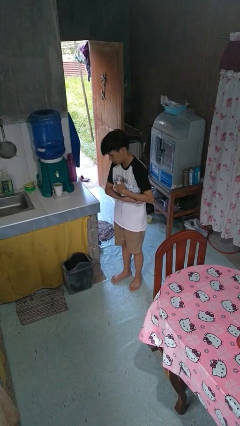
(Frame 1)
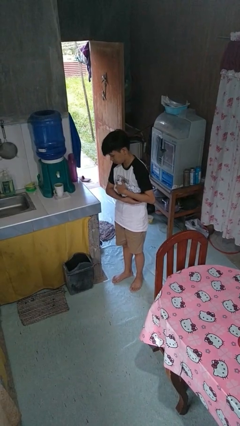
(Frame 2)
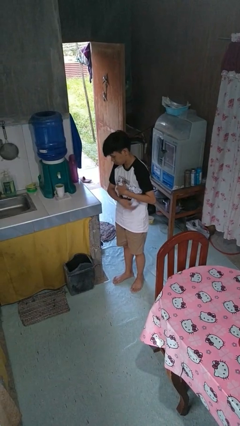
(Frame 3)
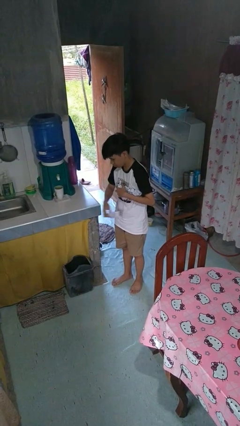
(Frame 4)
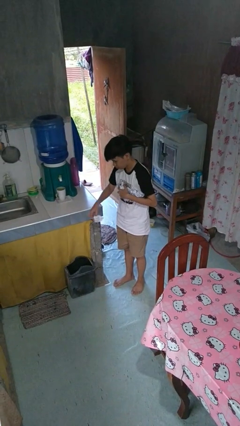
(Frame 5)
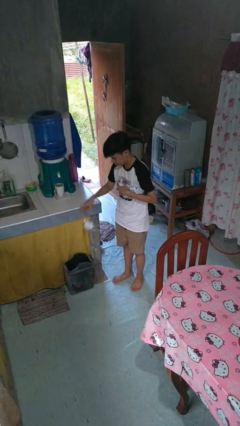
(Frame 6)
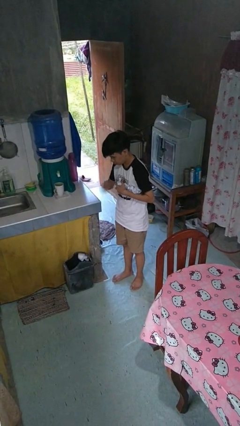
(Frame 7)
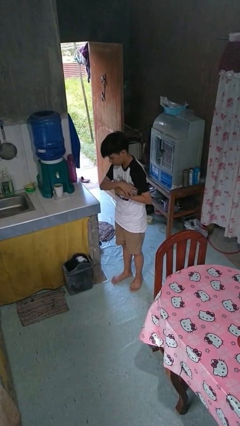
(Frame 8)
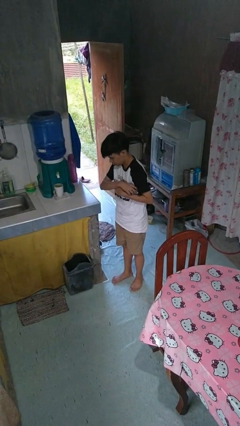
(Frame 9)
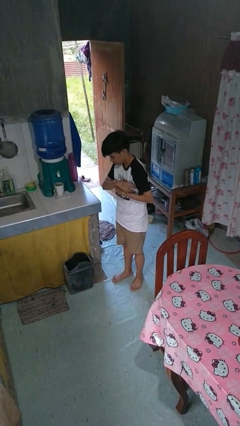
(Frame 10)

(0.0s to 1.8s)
person discards trash

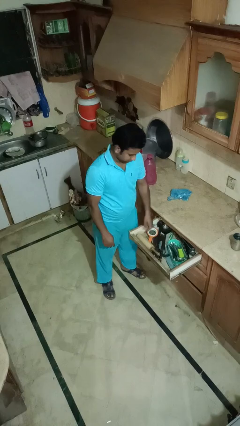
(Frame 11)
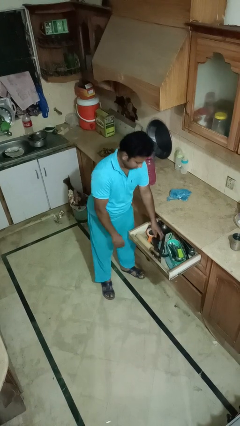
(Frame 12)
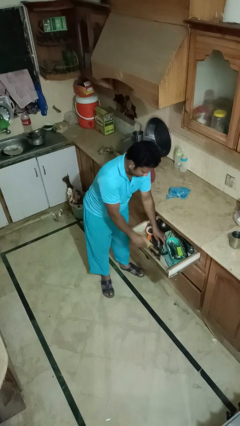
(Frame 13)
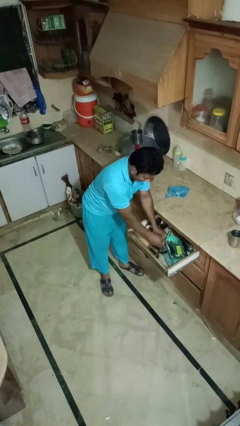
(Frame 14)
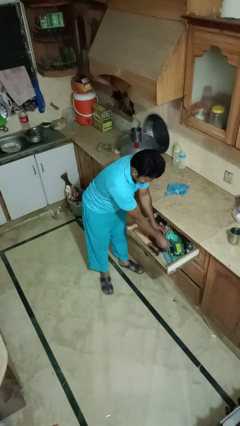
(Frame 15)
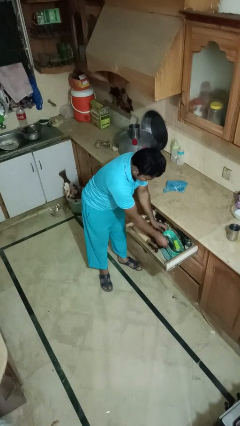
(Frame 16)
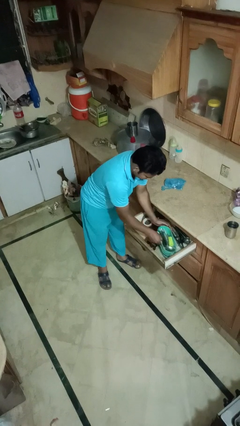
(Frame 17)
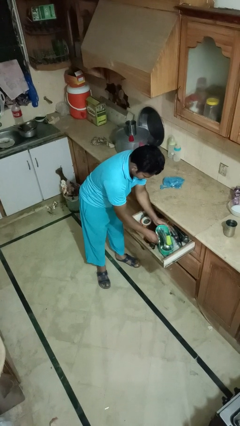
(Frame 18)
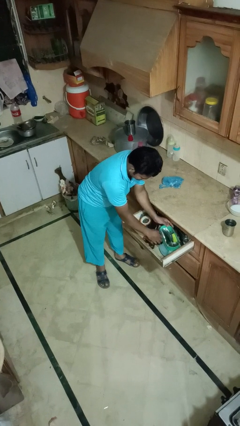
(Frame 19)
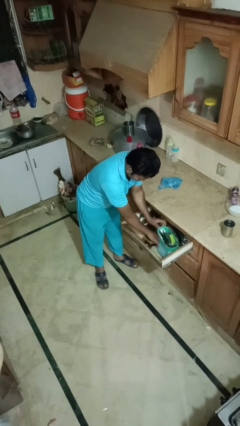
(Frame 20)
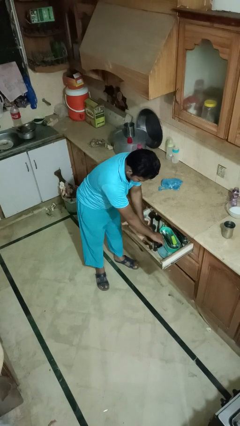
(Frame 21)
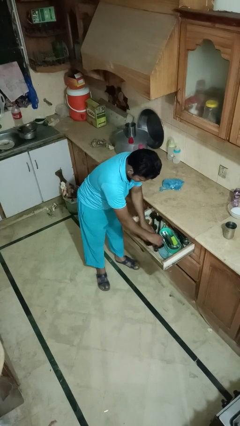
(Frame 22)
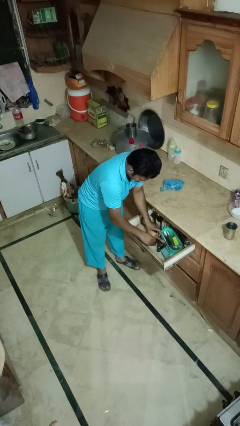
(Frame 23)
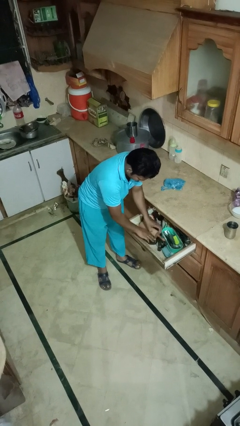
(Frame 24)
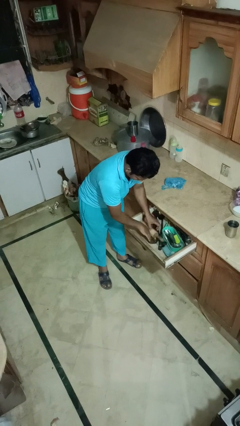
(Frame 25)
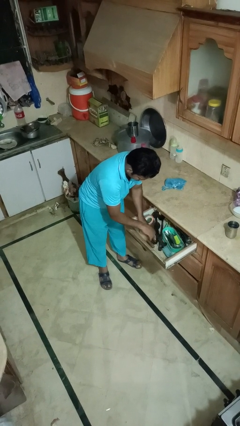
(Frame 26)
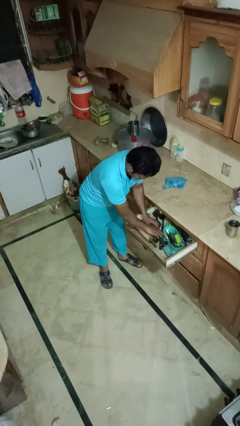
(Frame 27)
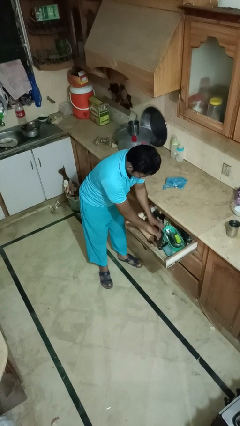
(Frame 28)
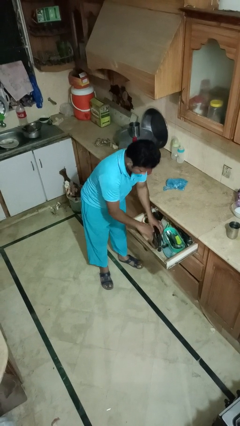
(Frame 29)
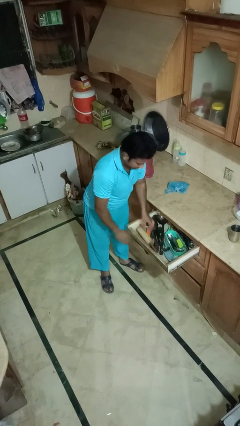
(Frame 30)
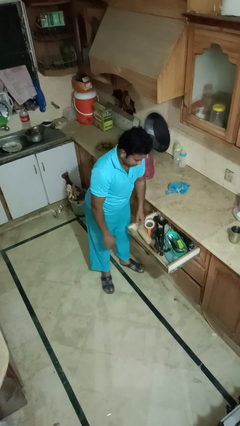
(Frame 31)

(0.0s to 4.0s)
person searches in kitchen drawer

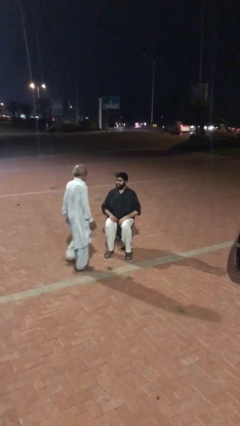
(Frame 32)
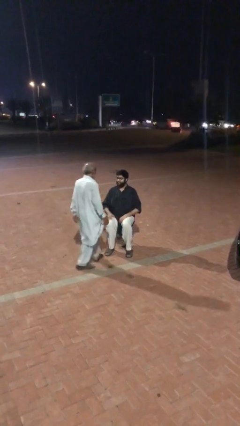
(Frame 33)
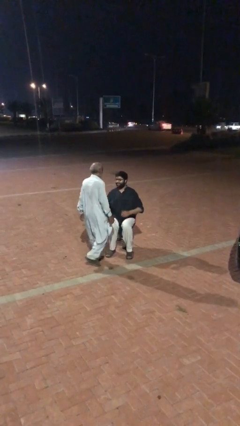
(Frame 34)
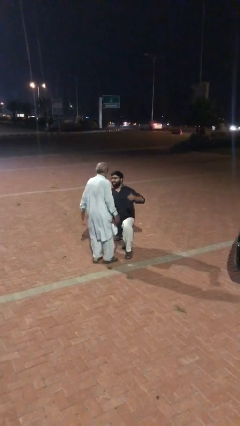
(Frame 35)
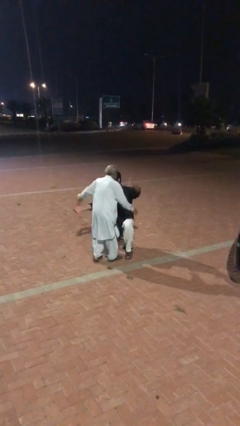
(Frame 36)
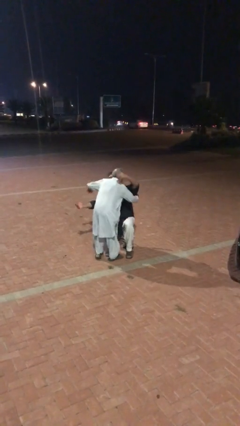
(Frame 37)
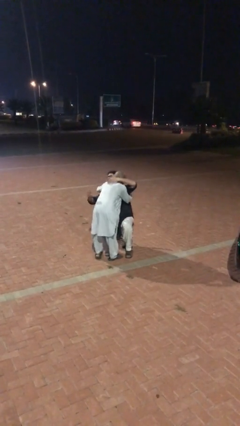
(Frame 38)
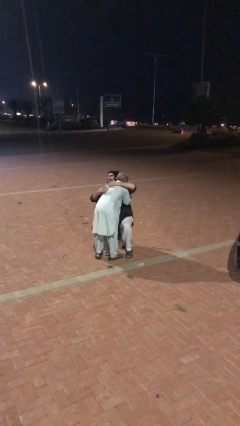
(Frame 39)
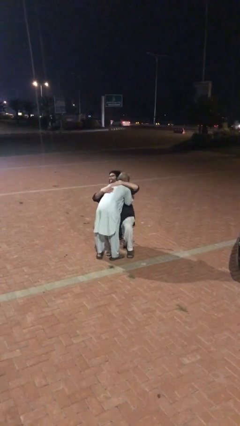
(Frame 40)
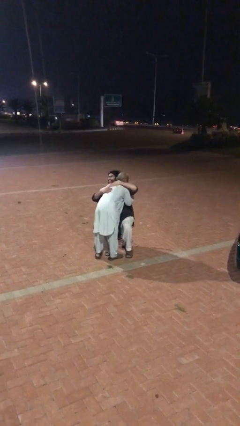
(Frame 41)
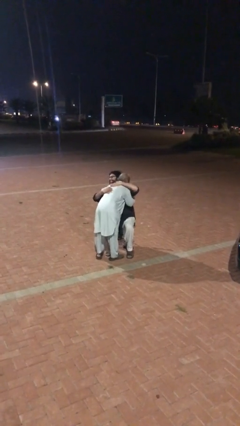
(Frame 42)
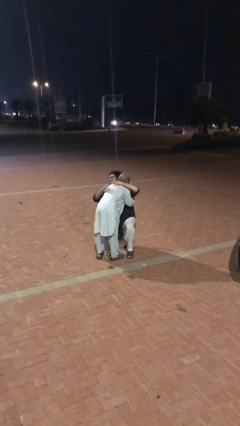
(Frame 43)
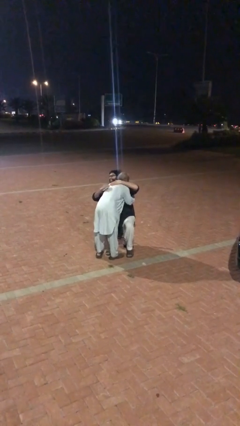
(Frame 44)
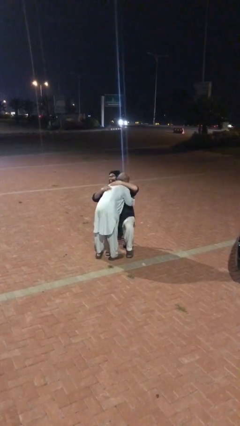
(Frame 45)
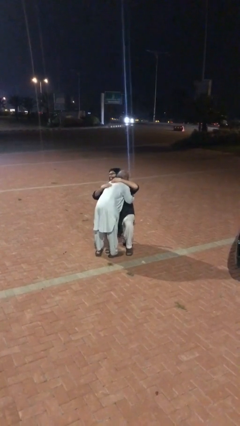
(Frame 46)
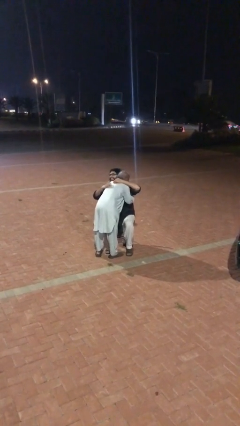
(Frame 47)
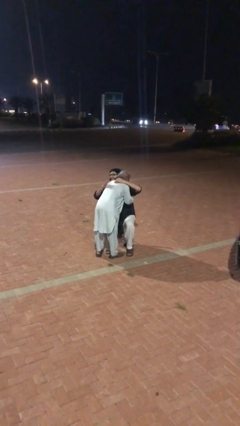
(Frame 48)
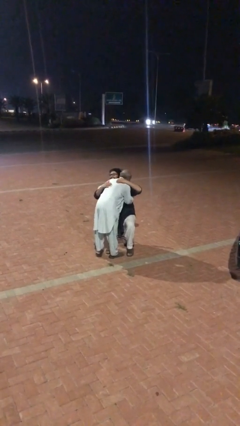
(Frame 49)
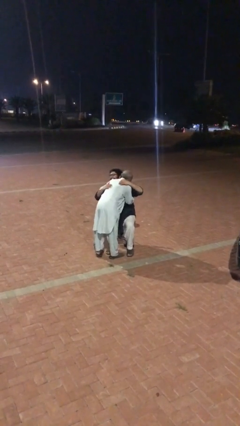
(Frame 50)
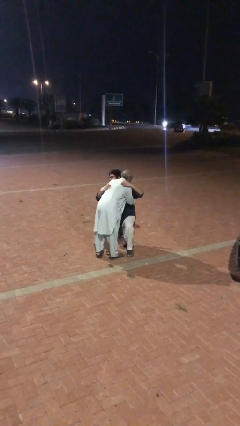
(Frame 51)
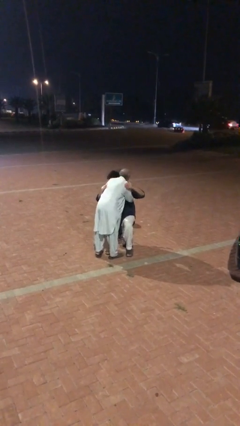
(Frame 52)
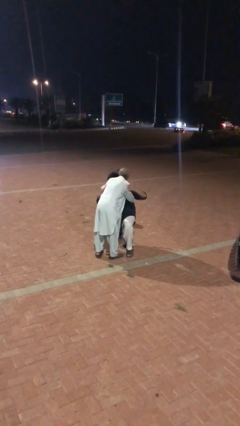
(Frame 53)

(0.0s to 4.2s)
person embraces person

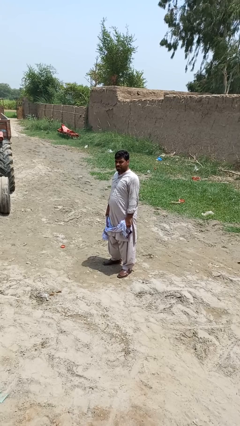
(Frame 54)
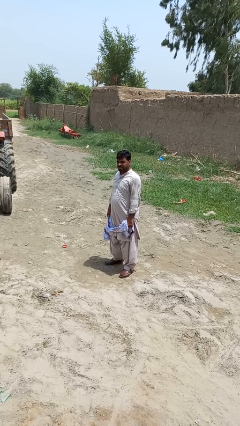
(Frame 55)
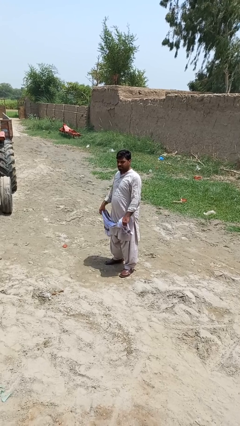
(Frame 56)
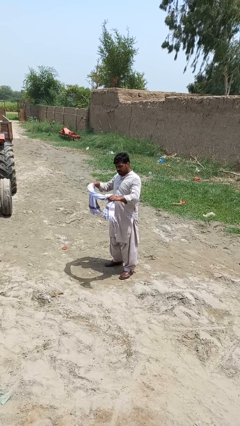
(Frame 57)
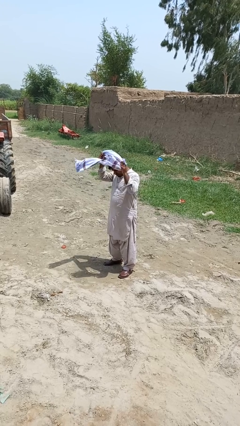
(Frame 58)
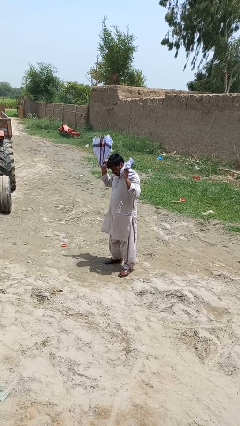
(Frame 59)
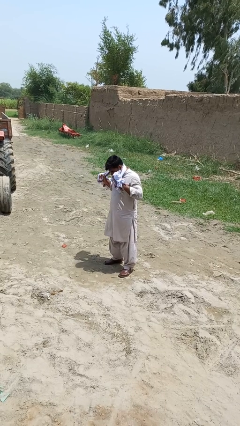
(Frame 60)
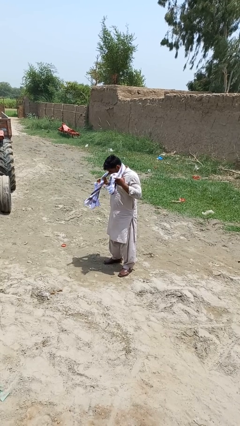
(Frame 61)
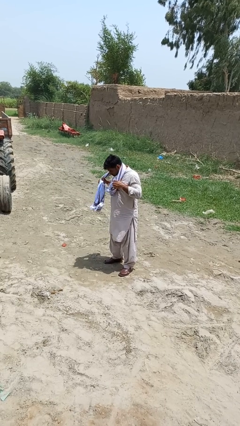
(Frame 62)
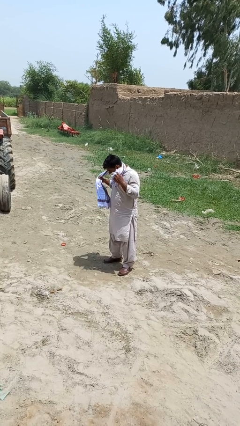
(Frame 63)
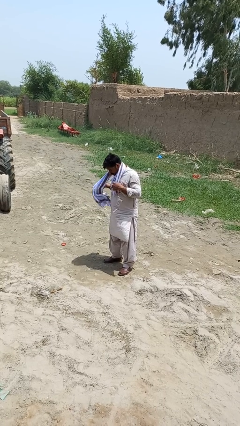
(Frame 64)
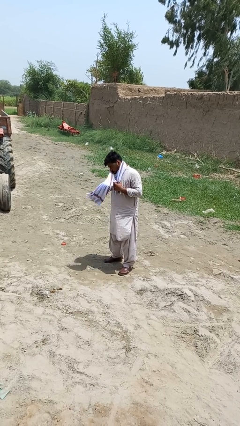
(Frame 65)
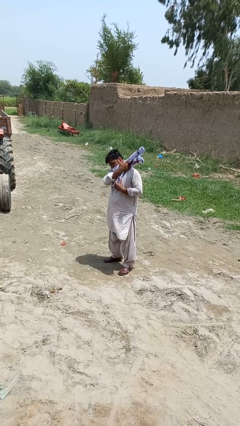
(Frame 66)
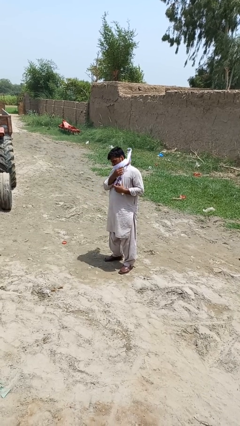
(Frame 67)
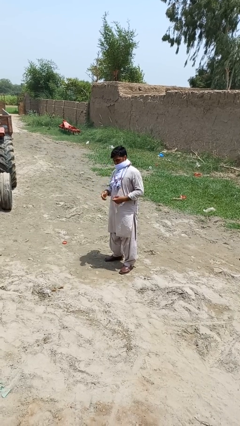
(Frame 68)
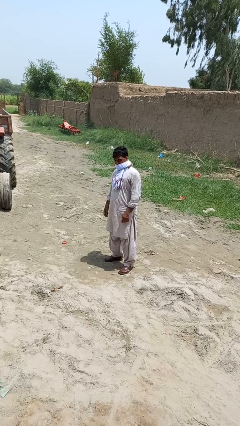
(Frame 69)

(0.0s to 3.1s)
person puts on scarf

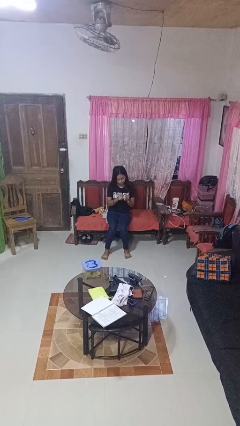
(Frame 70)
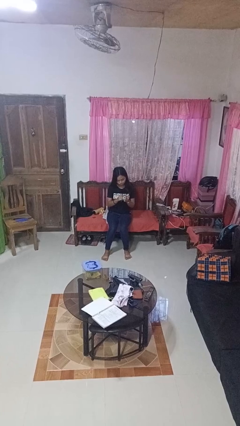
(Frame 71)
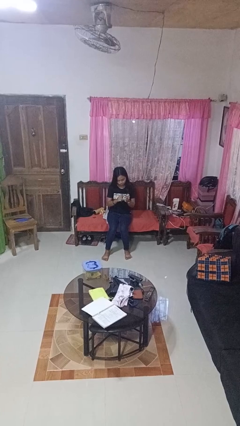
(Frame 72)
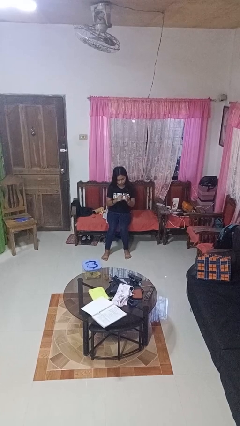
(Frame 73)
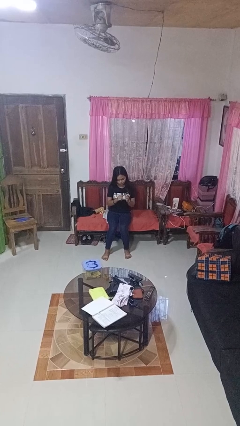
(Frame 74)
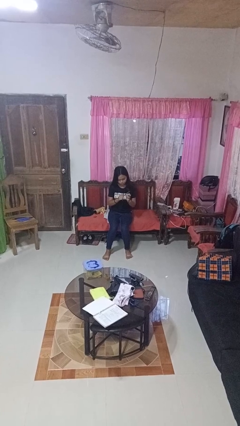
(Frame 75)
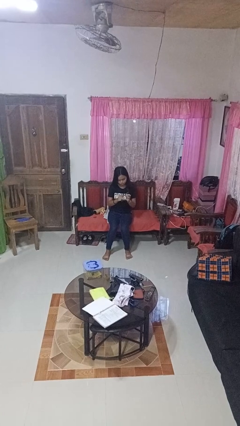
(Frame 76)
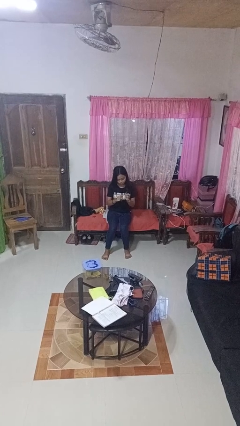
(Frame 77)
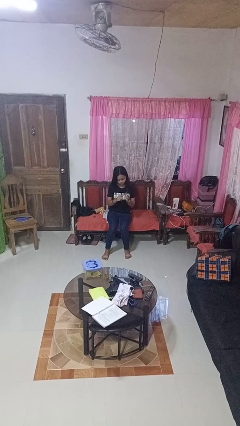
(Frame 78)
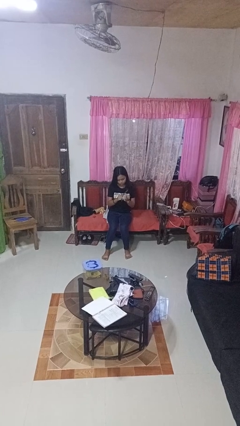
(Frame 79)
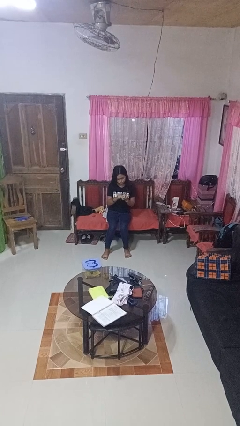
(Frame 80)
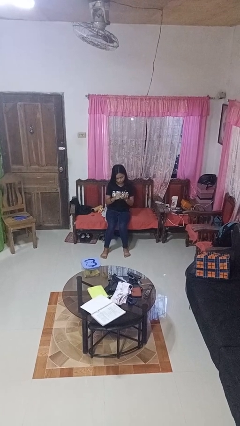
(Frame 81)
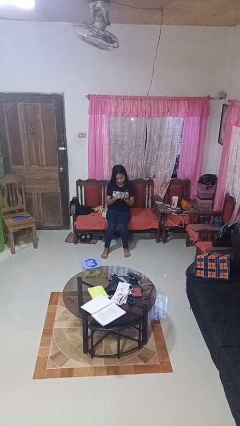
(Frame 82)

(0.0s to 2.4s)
person files fingernails

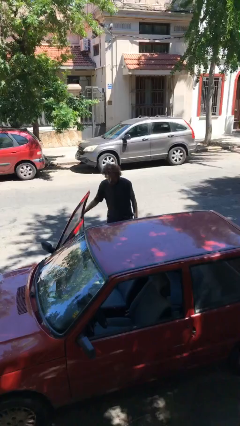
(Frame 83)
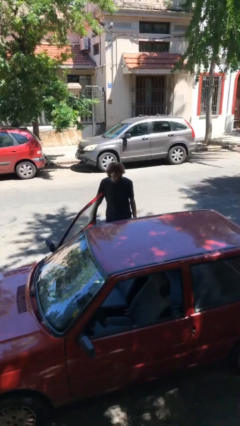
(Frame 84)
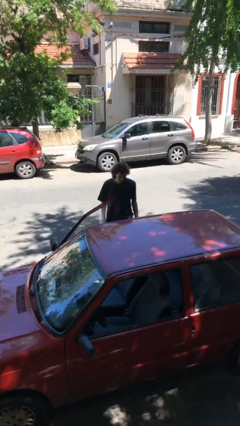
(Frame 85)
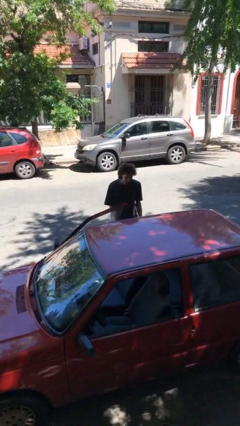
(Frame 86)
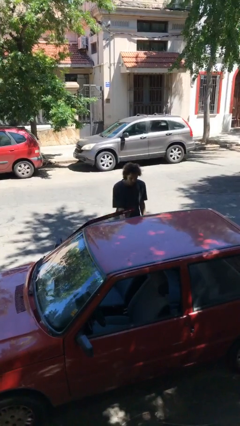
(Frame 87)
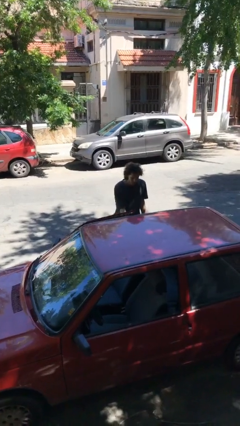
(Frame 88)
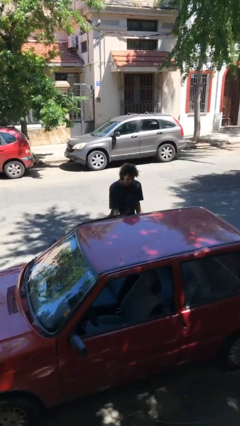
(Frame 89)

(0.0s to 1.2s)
person closes car door

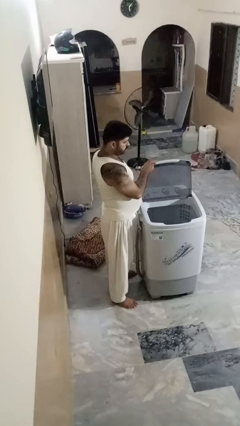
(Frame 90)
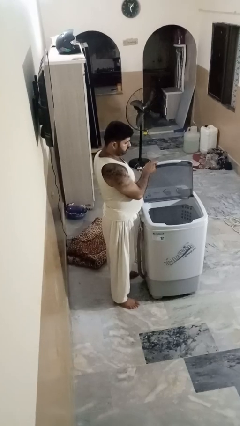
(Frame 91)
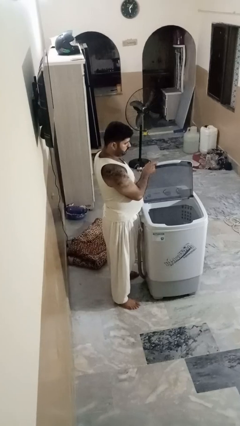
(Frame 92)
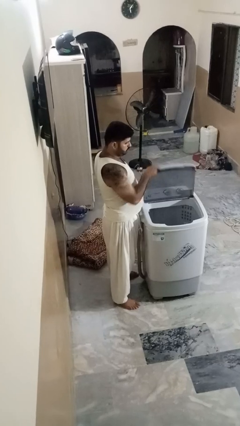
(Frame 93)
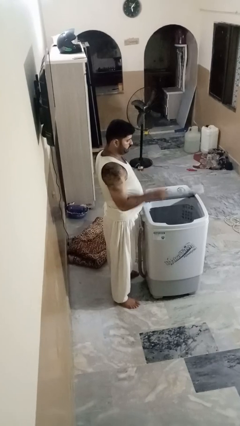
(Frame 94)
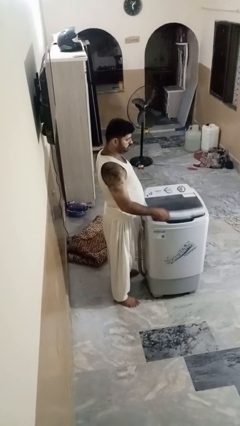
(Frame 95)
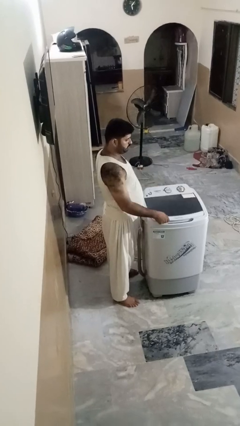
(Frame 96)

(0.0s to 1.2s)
person closes clothes washer
